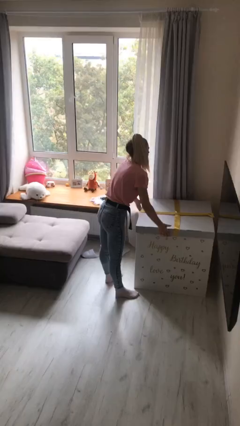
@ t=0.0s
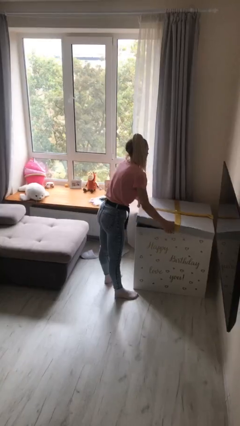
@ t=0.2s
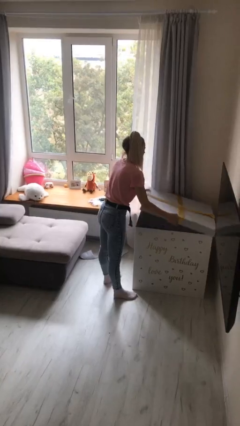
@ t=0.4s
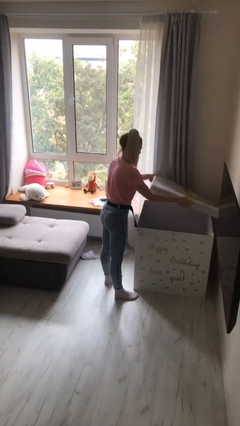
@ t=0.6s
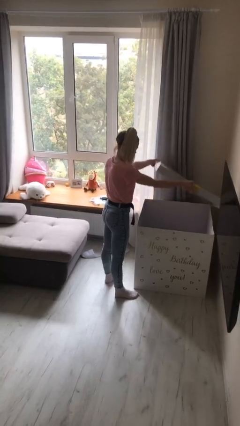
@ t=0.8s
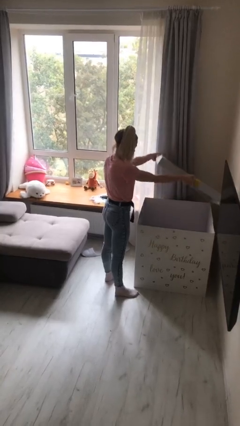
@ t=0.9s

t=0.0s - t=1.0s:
person opens box

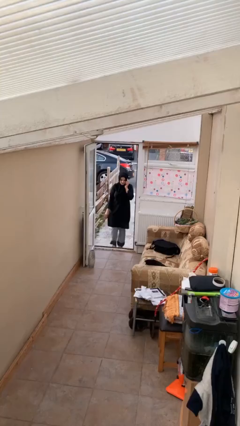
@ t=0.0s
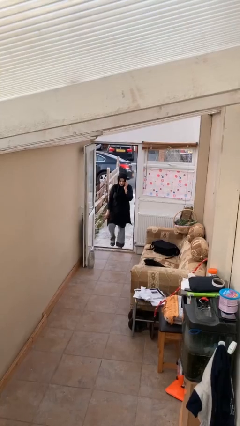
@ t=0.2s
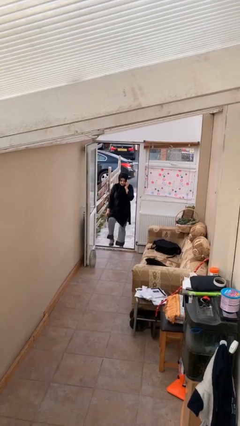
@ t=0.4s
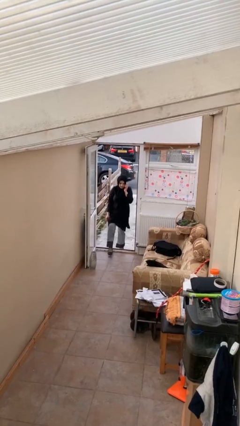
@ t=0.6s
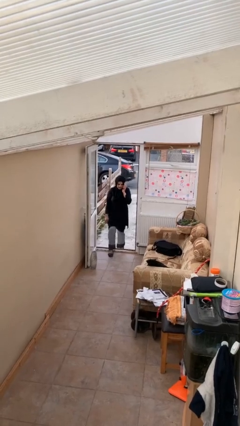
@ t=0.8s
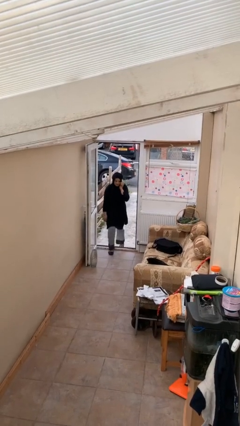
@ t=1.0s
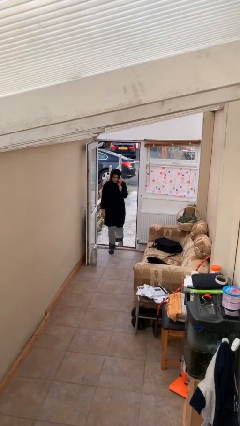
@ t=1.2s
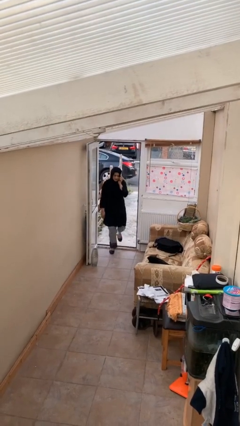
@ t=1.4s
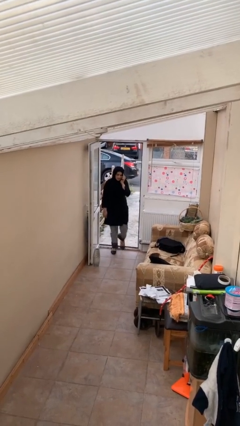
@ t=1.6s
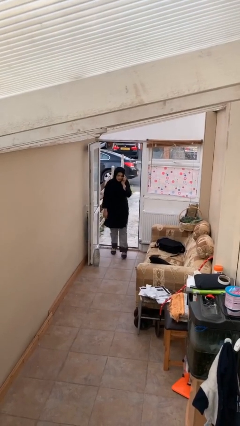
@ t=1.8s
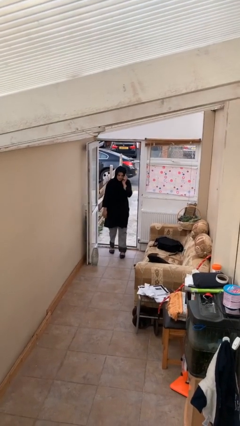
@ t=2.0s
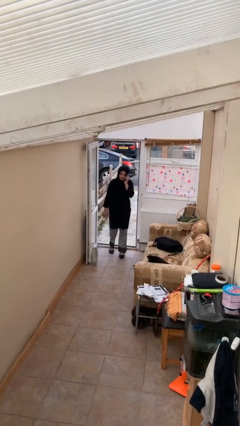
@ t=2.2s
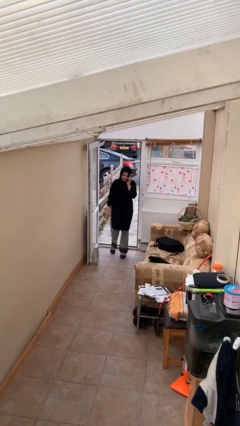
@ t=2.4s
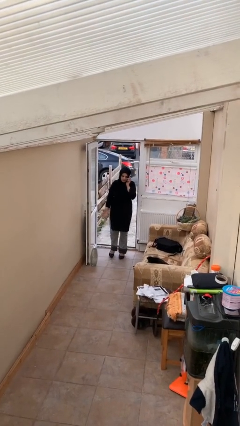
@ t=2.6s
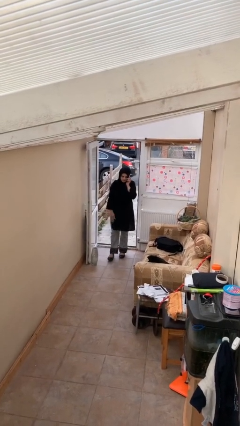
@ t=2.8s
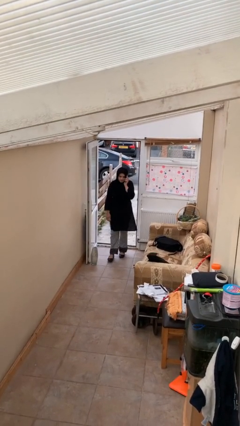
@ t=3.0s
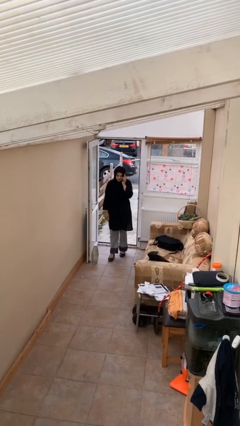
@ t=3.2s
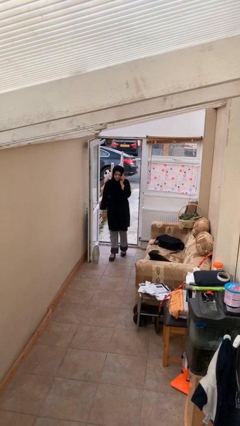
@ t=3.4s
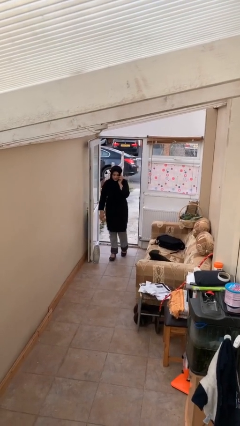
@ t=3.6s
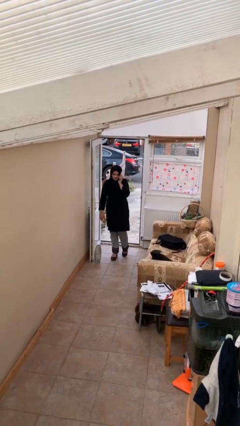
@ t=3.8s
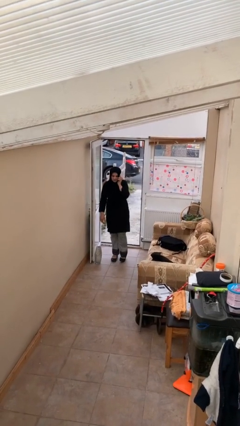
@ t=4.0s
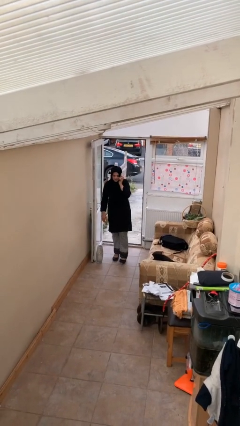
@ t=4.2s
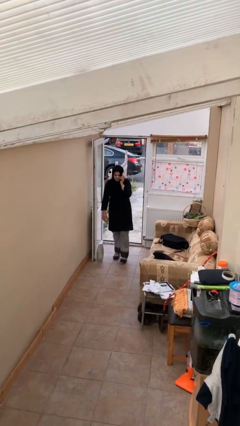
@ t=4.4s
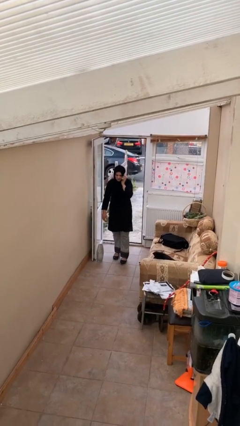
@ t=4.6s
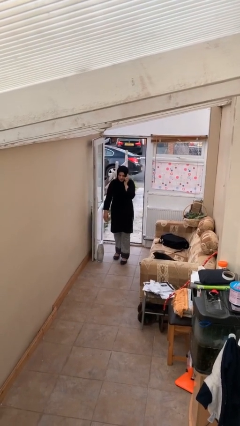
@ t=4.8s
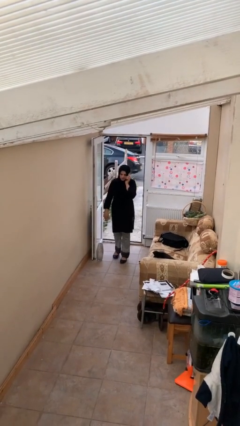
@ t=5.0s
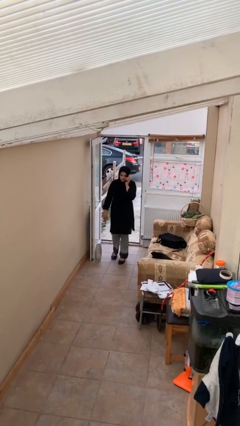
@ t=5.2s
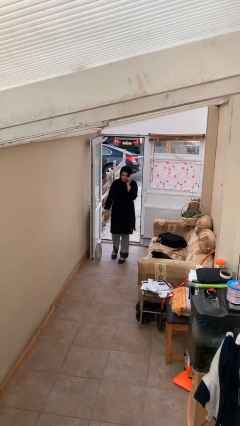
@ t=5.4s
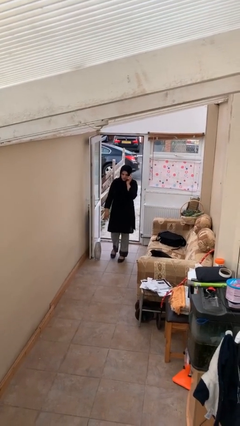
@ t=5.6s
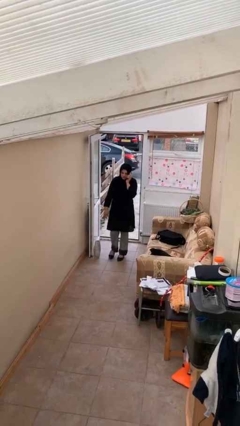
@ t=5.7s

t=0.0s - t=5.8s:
person enters scene through structure

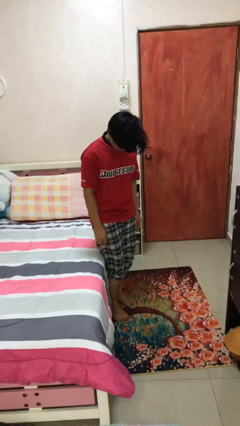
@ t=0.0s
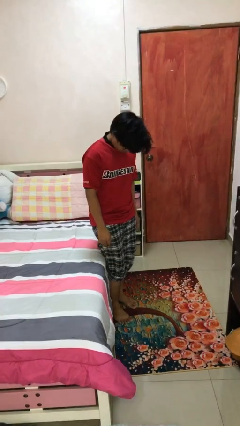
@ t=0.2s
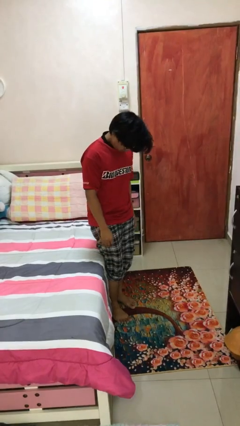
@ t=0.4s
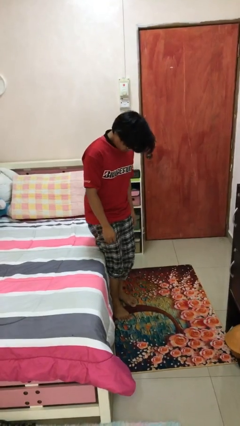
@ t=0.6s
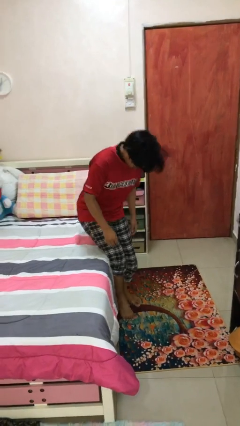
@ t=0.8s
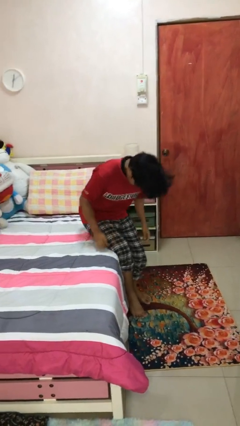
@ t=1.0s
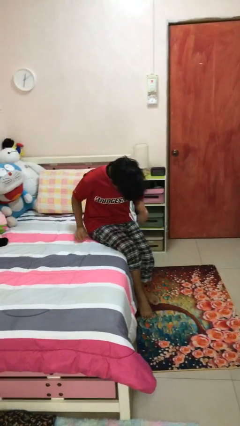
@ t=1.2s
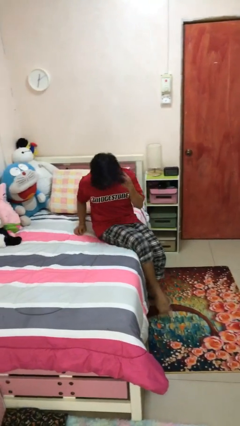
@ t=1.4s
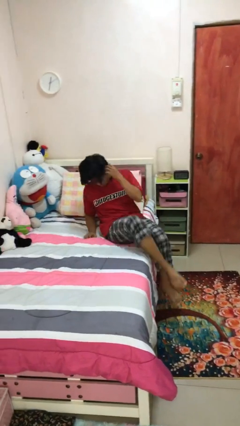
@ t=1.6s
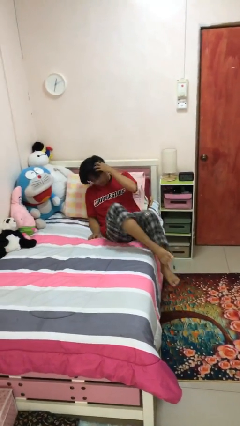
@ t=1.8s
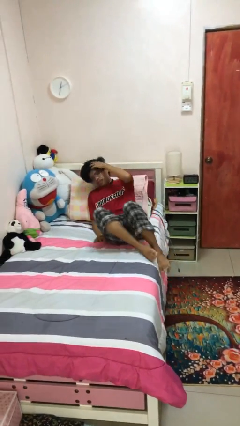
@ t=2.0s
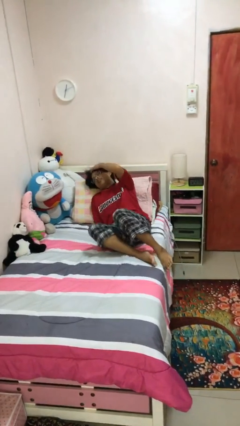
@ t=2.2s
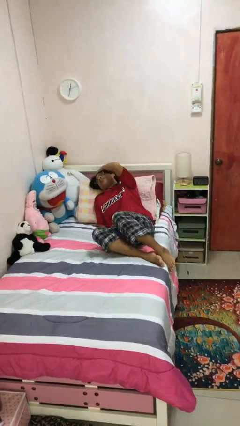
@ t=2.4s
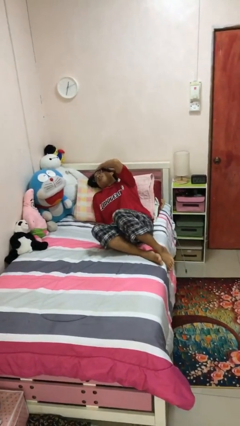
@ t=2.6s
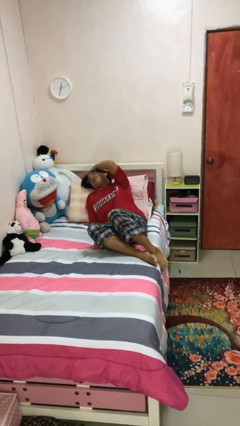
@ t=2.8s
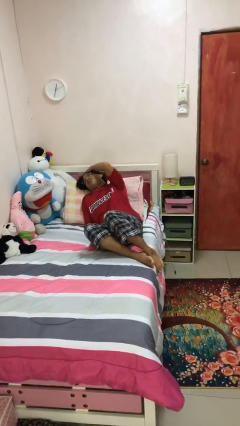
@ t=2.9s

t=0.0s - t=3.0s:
person lies down on bed

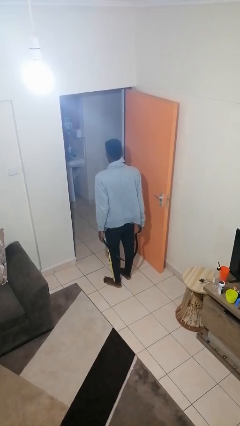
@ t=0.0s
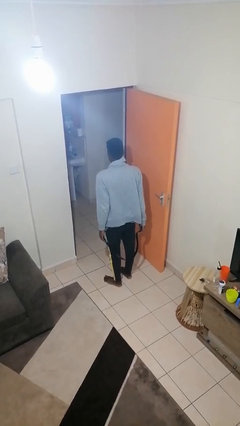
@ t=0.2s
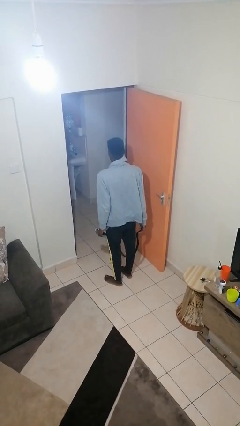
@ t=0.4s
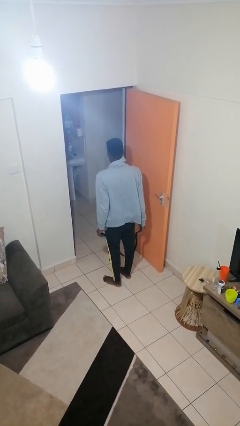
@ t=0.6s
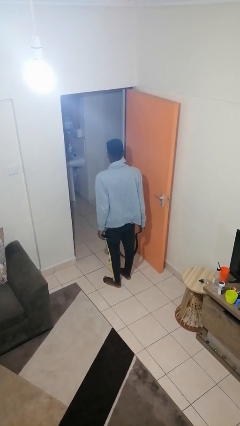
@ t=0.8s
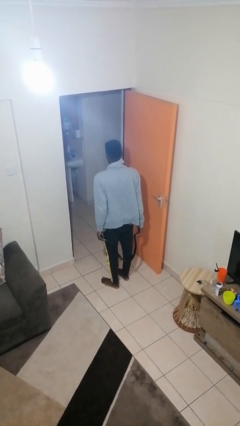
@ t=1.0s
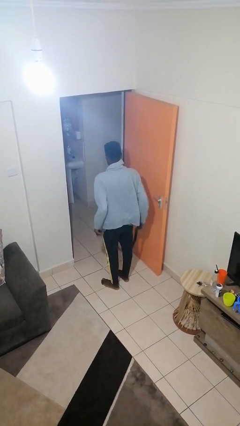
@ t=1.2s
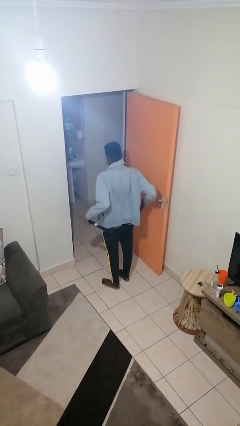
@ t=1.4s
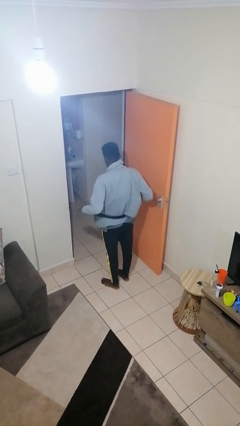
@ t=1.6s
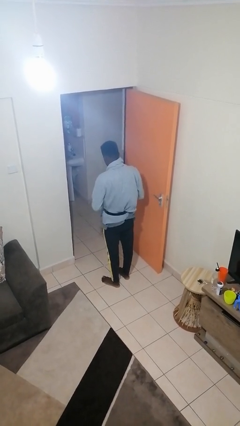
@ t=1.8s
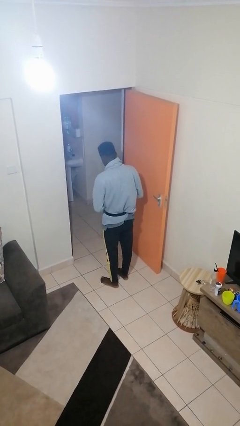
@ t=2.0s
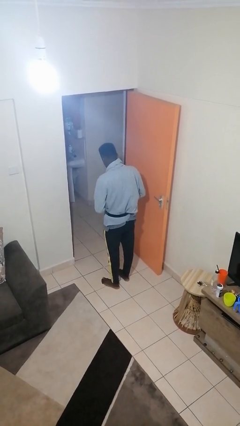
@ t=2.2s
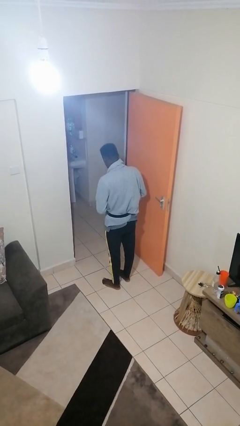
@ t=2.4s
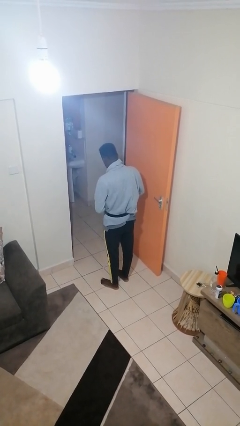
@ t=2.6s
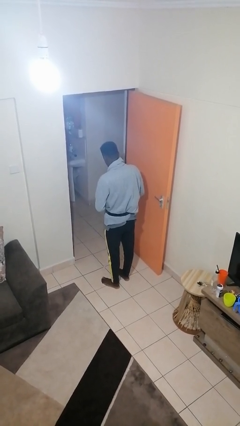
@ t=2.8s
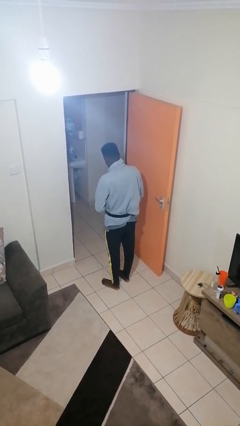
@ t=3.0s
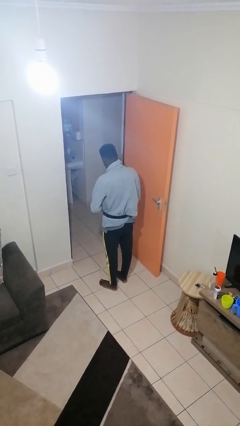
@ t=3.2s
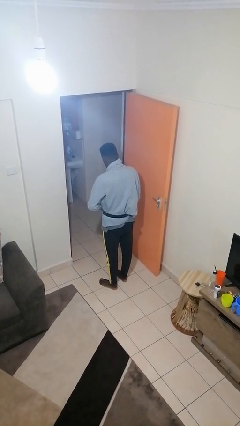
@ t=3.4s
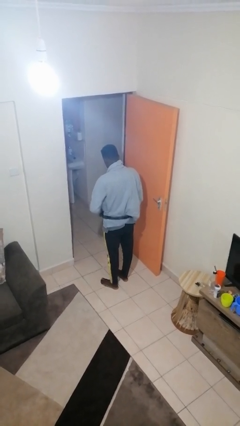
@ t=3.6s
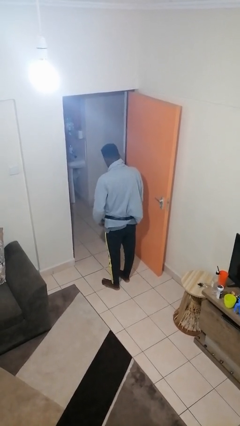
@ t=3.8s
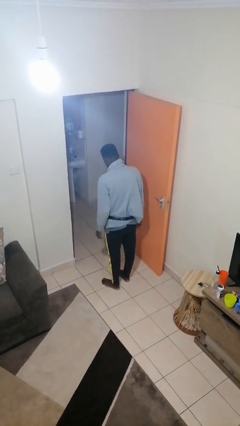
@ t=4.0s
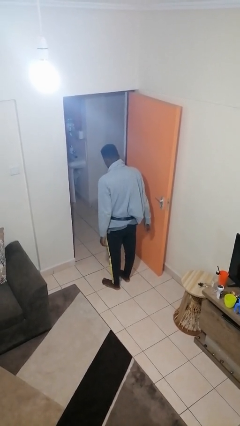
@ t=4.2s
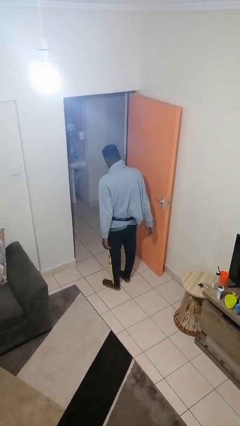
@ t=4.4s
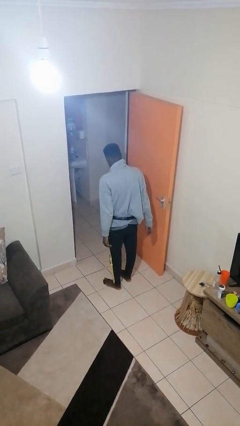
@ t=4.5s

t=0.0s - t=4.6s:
person puts on belt

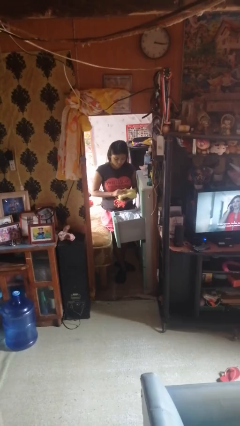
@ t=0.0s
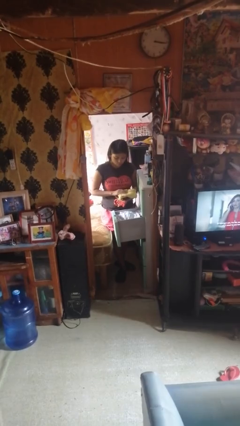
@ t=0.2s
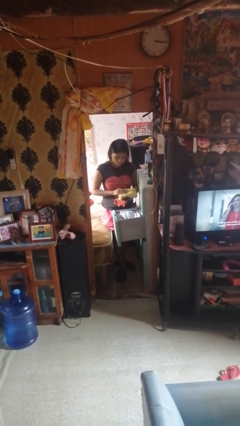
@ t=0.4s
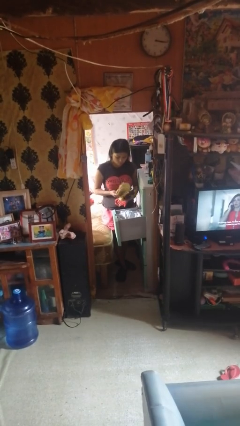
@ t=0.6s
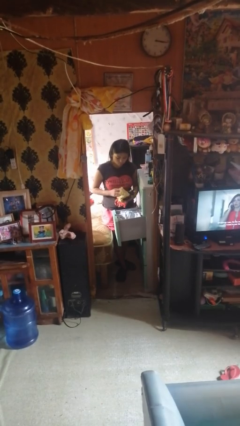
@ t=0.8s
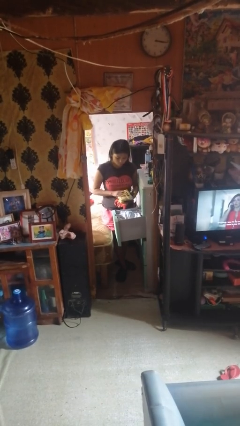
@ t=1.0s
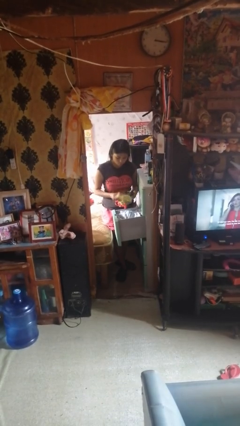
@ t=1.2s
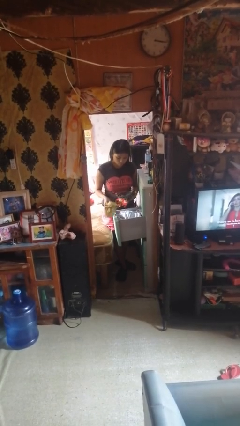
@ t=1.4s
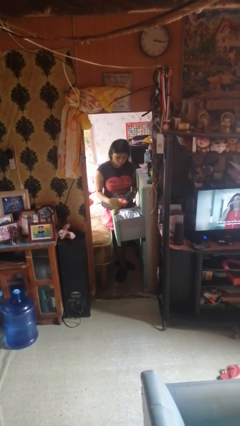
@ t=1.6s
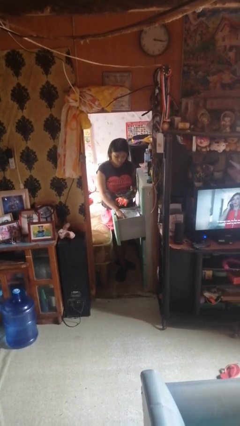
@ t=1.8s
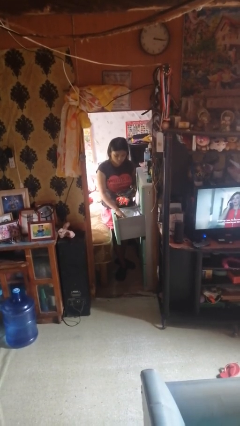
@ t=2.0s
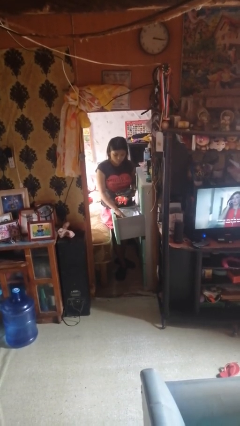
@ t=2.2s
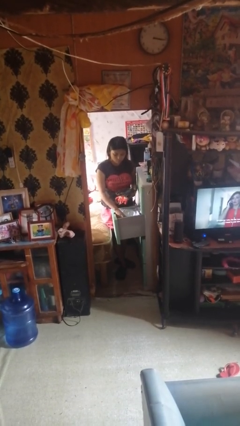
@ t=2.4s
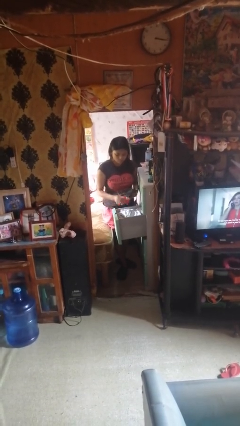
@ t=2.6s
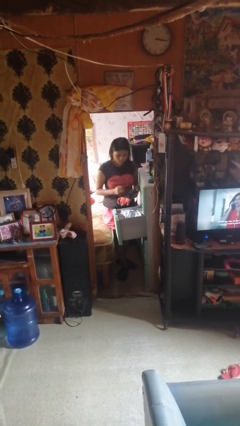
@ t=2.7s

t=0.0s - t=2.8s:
person puts clothes into dresser

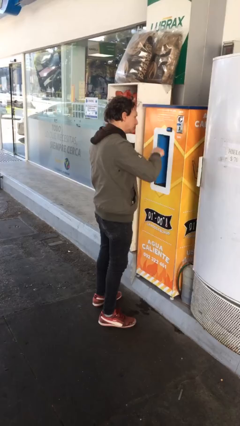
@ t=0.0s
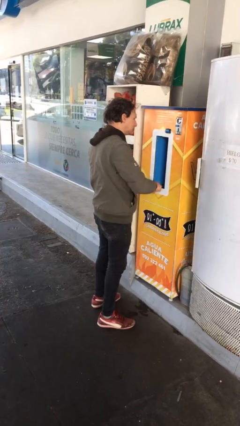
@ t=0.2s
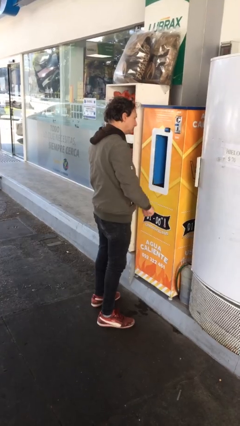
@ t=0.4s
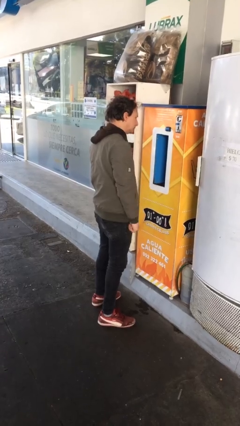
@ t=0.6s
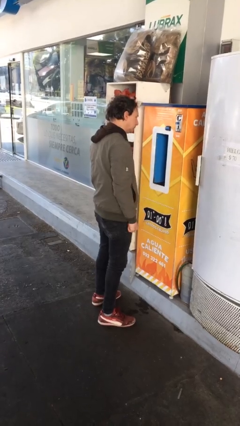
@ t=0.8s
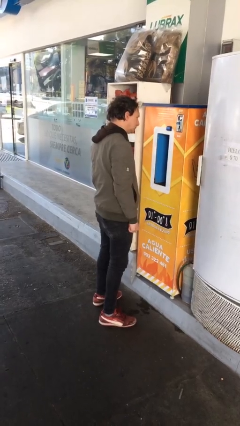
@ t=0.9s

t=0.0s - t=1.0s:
person purchases from machine
